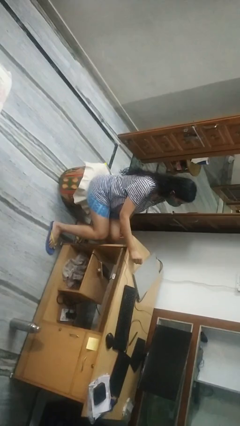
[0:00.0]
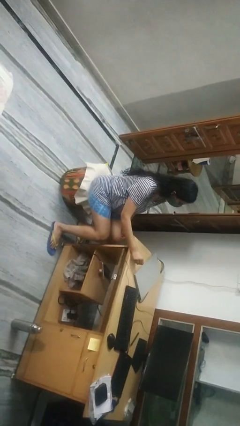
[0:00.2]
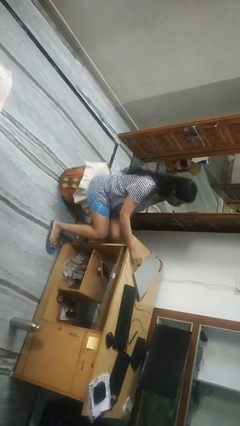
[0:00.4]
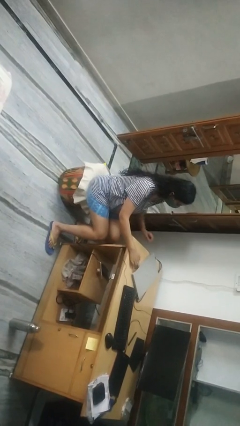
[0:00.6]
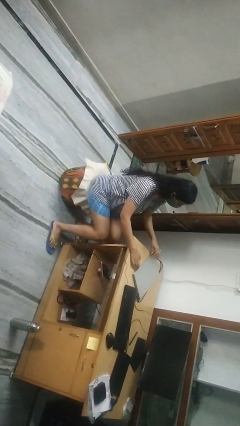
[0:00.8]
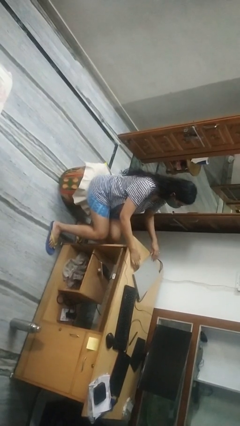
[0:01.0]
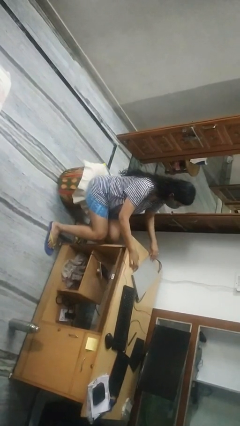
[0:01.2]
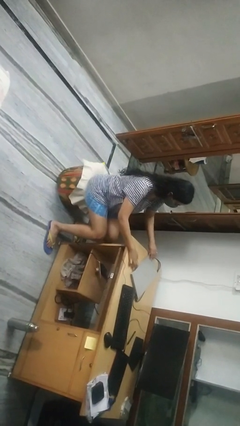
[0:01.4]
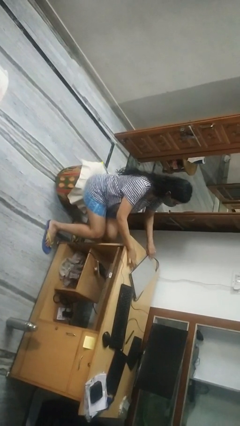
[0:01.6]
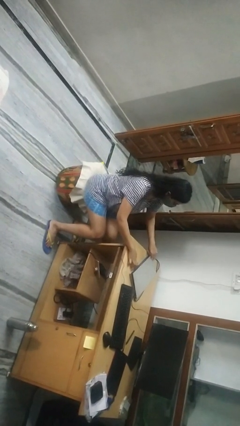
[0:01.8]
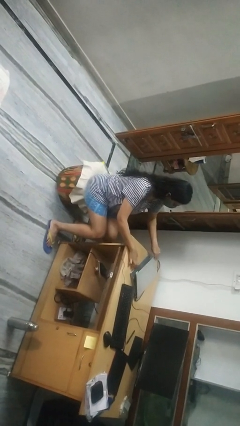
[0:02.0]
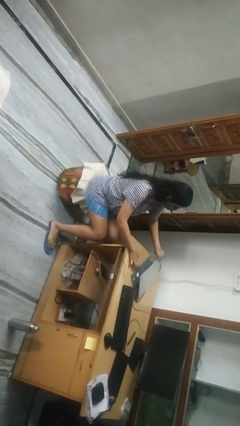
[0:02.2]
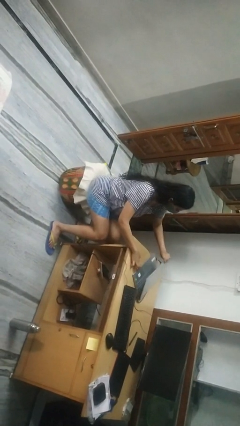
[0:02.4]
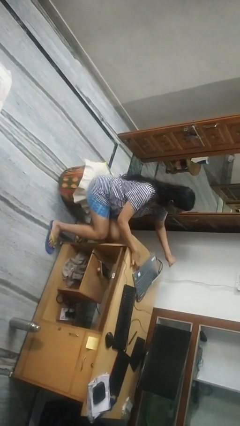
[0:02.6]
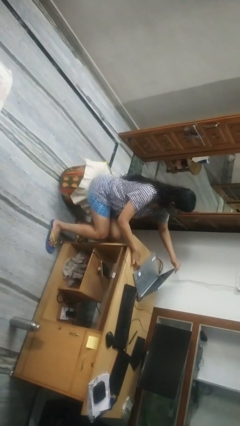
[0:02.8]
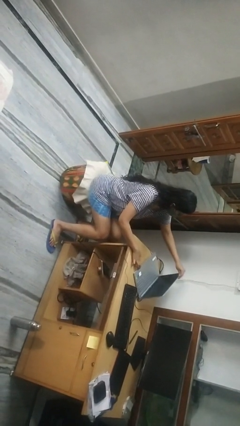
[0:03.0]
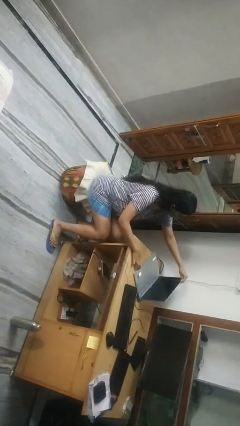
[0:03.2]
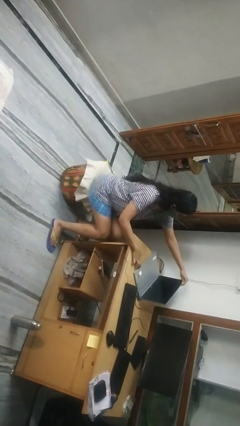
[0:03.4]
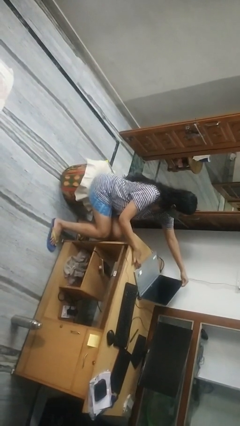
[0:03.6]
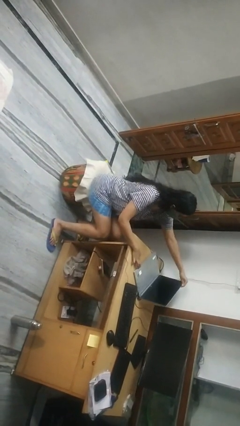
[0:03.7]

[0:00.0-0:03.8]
person opens laptop

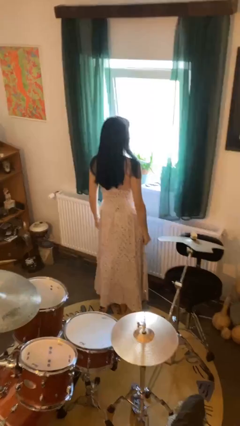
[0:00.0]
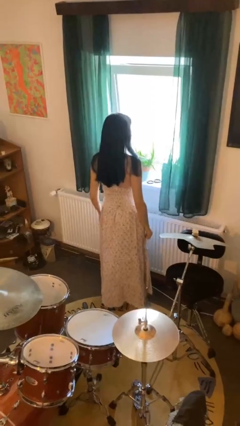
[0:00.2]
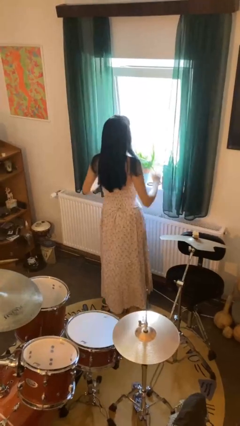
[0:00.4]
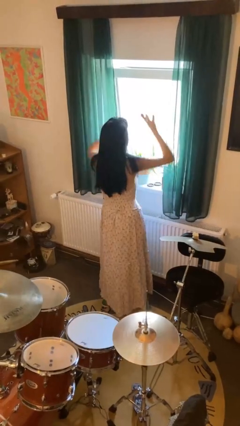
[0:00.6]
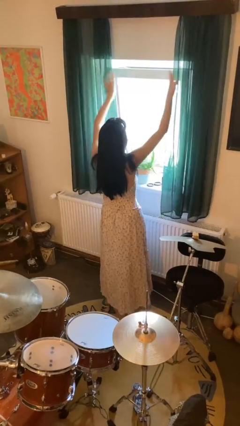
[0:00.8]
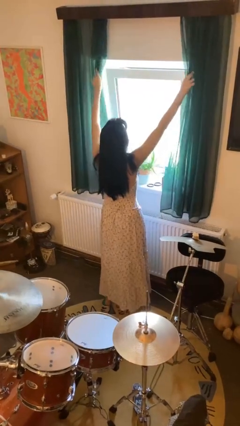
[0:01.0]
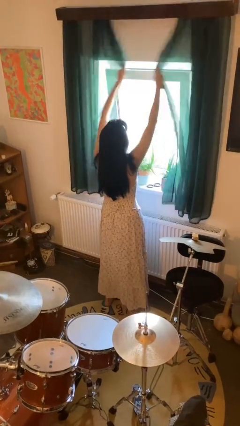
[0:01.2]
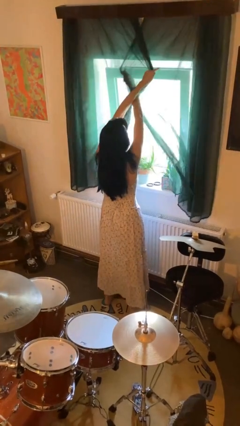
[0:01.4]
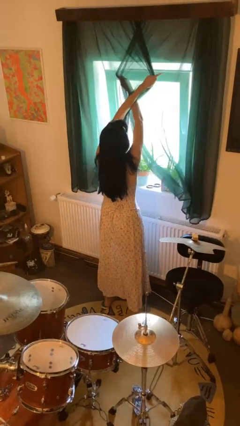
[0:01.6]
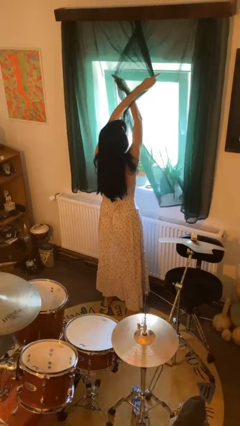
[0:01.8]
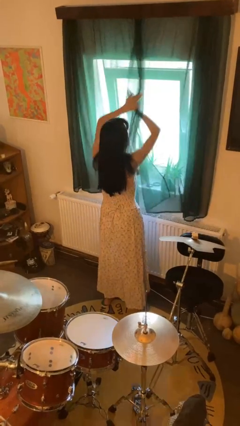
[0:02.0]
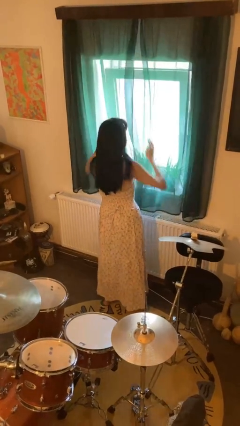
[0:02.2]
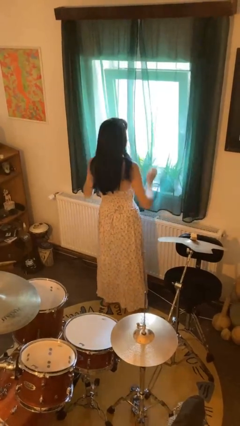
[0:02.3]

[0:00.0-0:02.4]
person closes curtains

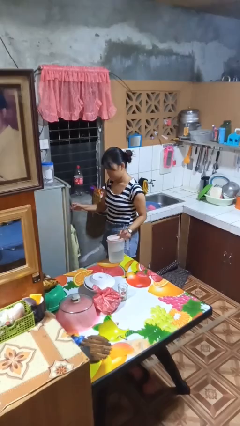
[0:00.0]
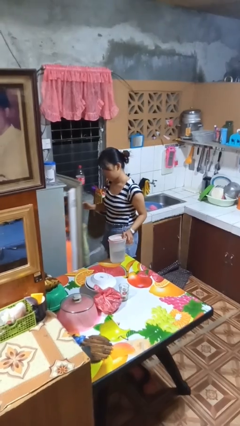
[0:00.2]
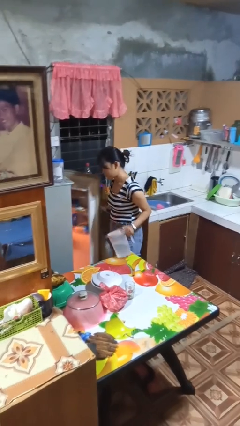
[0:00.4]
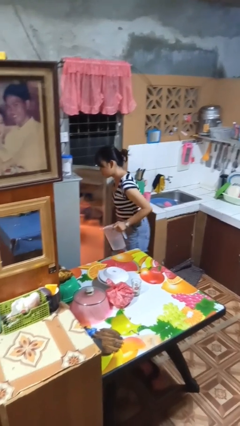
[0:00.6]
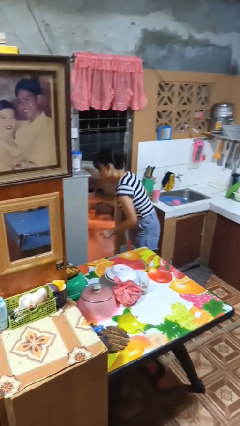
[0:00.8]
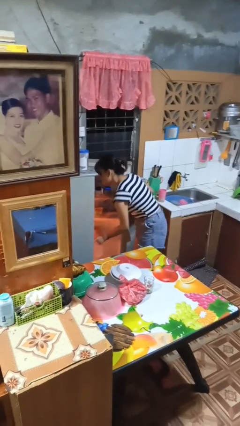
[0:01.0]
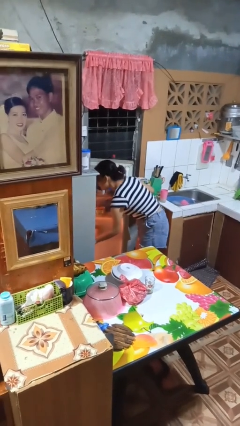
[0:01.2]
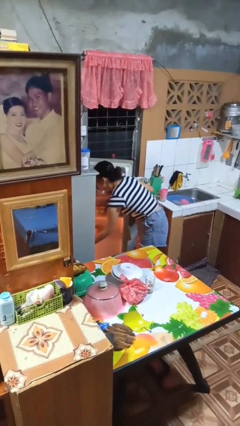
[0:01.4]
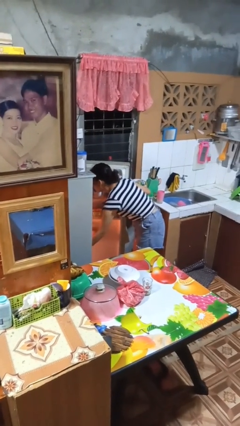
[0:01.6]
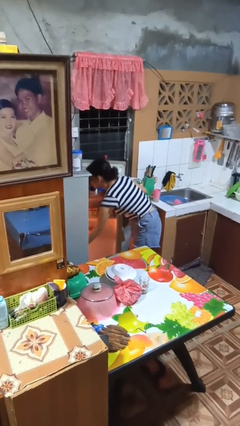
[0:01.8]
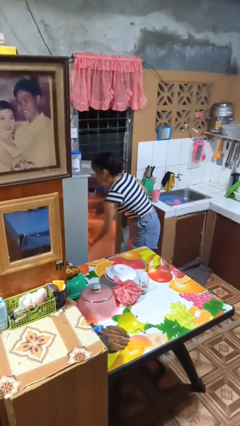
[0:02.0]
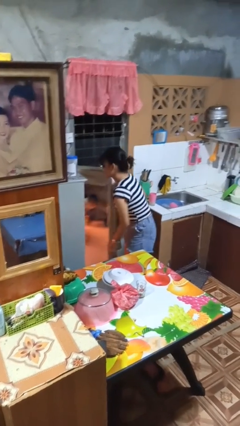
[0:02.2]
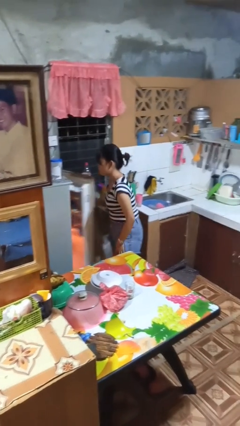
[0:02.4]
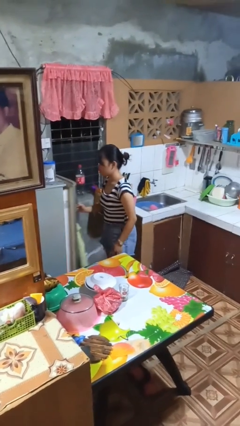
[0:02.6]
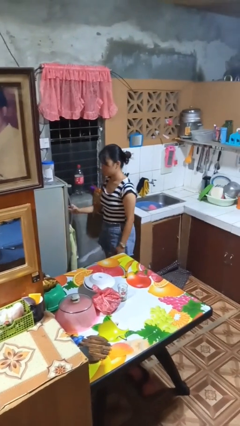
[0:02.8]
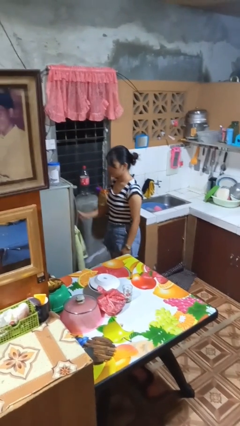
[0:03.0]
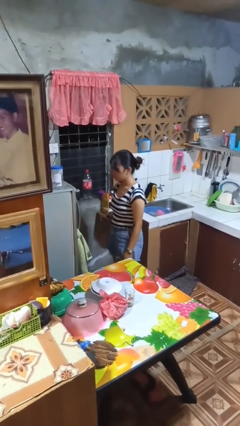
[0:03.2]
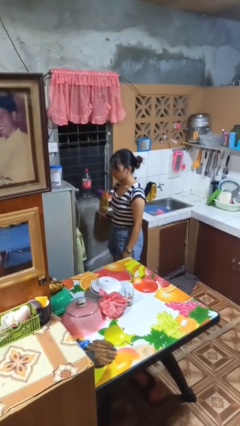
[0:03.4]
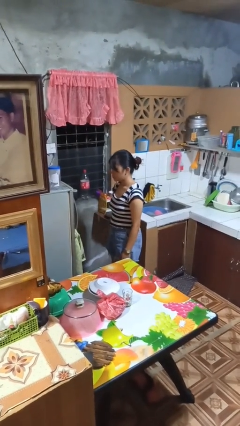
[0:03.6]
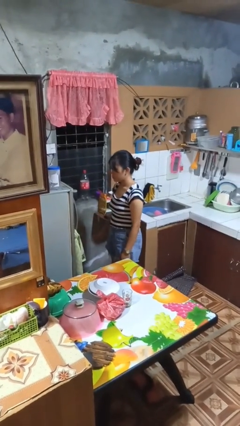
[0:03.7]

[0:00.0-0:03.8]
person puts object into refrigerator

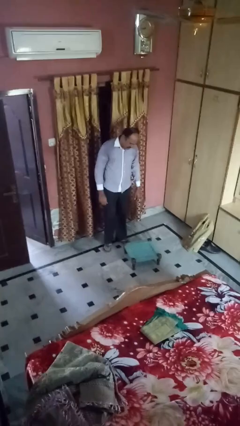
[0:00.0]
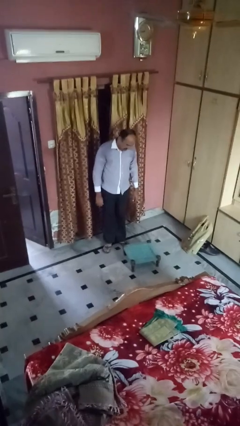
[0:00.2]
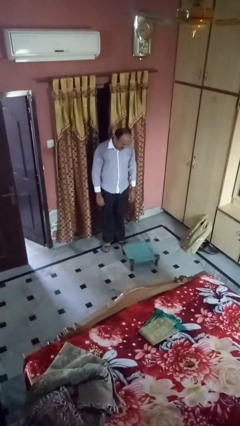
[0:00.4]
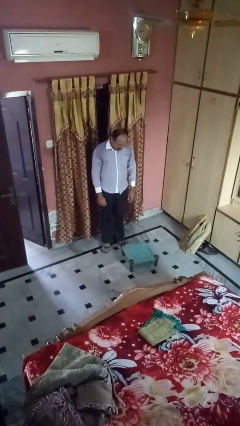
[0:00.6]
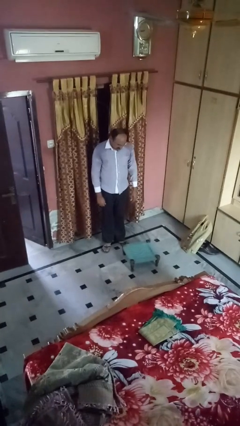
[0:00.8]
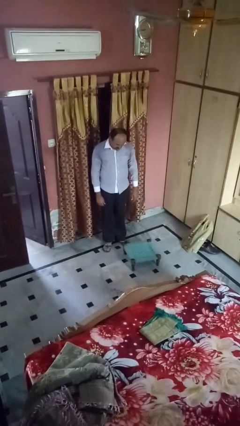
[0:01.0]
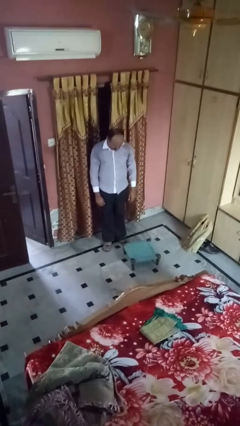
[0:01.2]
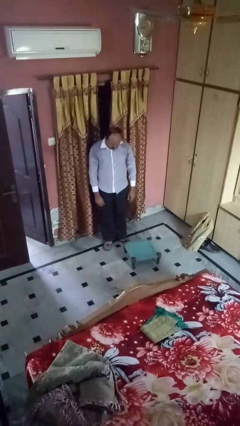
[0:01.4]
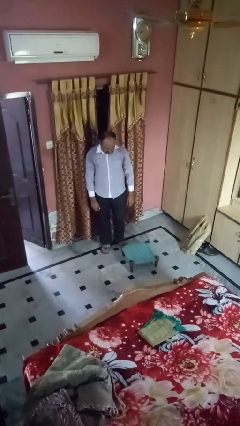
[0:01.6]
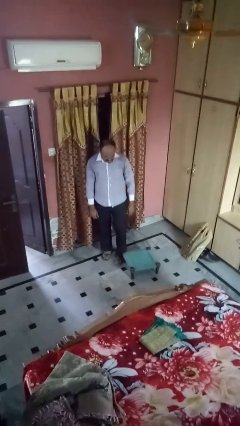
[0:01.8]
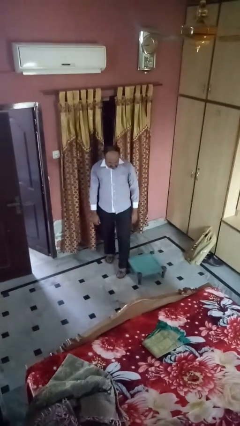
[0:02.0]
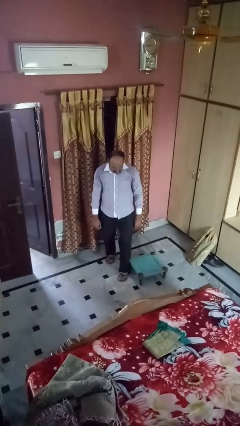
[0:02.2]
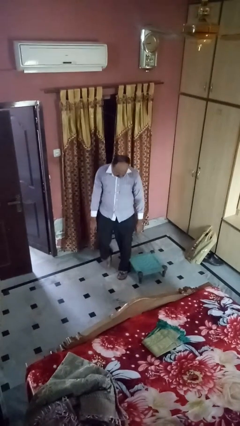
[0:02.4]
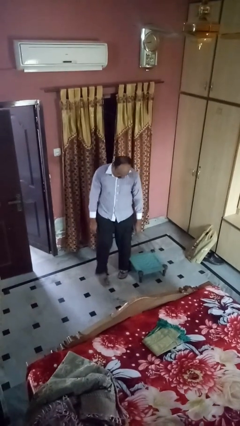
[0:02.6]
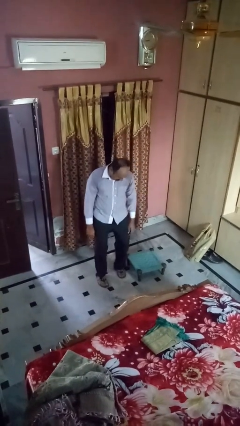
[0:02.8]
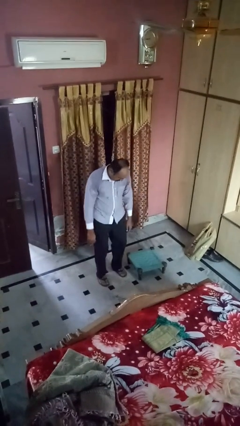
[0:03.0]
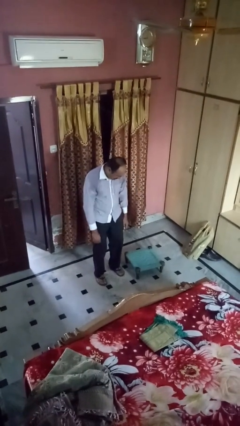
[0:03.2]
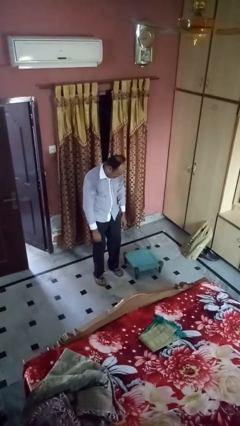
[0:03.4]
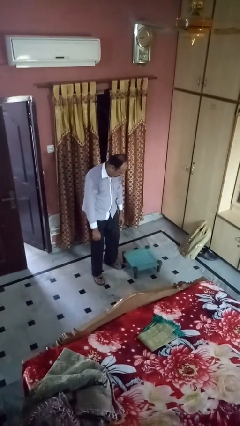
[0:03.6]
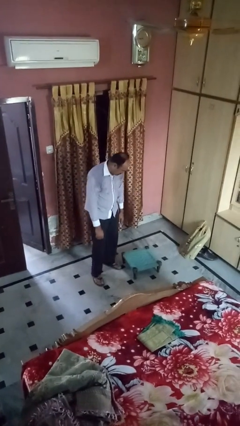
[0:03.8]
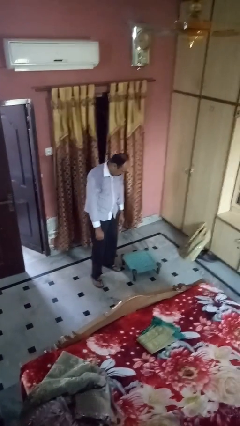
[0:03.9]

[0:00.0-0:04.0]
person knocks over furniture

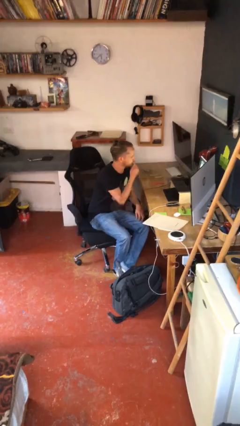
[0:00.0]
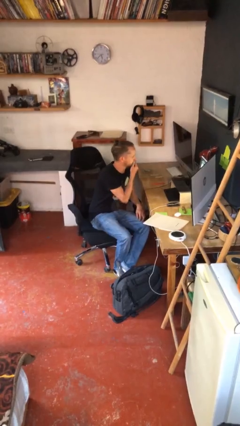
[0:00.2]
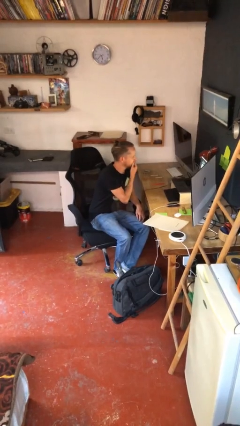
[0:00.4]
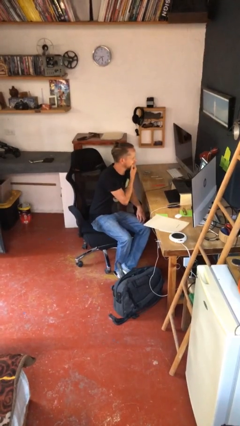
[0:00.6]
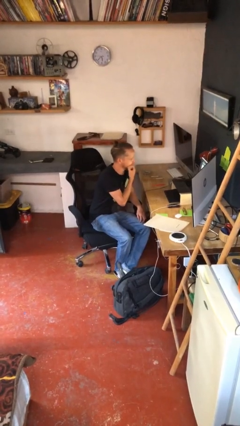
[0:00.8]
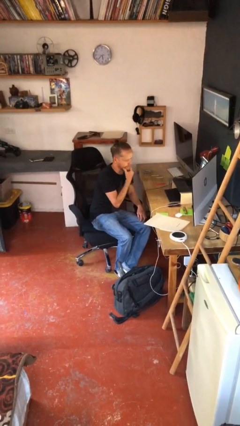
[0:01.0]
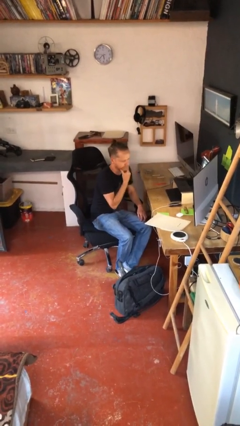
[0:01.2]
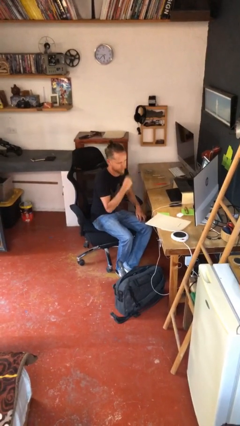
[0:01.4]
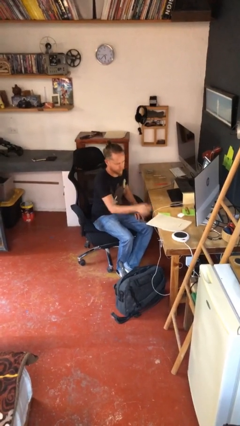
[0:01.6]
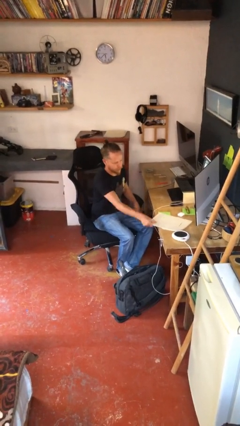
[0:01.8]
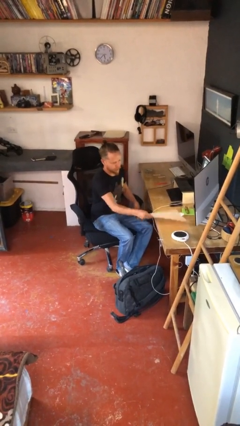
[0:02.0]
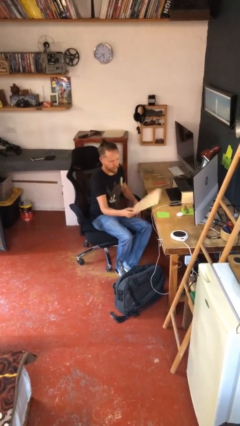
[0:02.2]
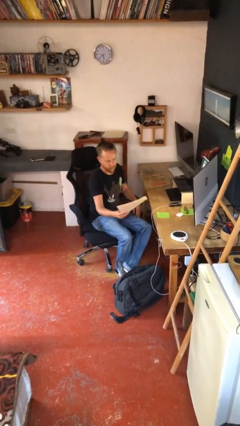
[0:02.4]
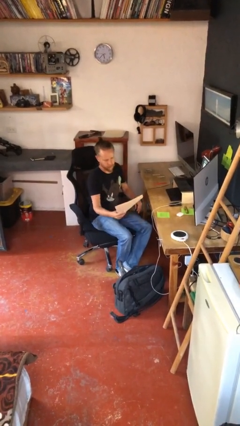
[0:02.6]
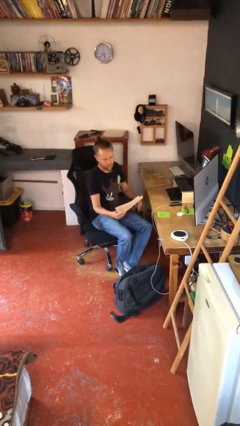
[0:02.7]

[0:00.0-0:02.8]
person picks up object from table

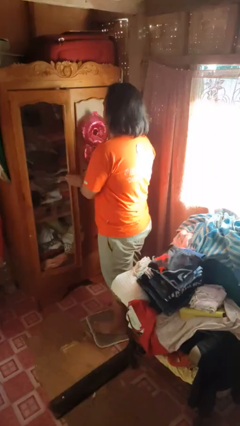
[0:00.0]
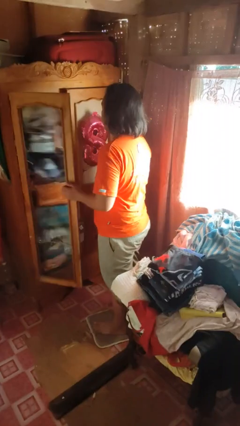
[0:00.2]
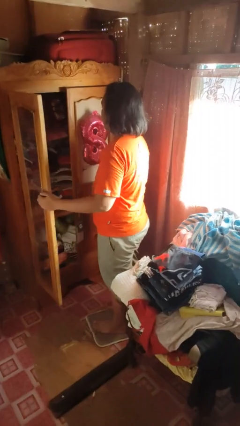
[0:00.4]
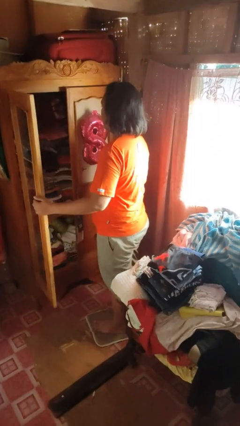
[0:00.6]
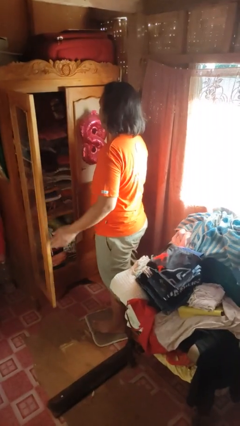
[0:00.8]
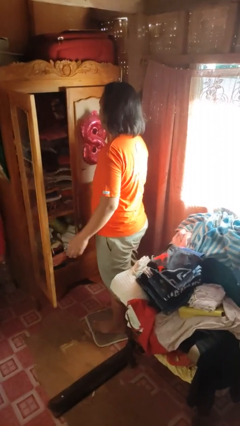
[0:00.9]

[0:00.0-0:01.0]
person opens dresser drawer
